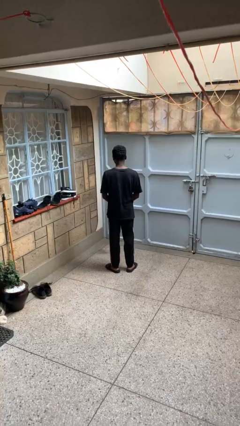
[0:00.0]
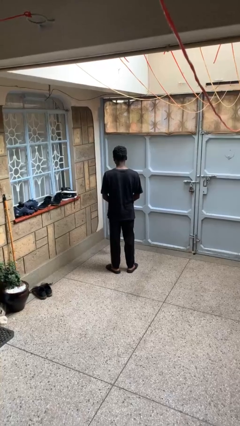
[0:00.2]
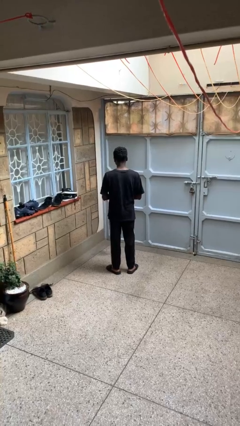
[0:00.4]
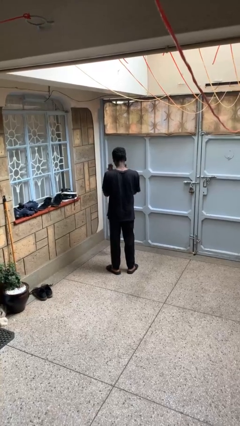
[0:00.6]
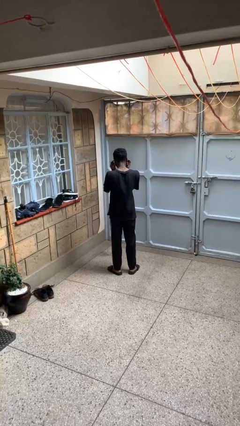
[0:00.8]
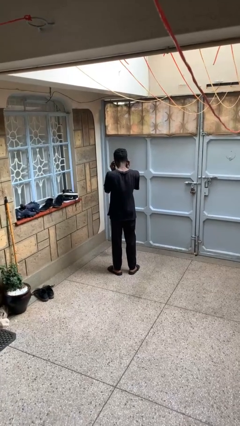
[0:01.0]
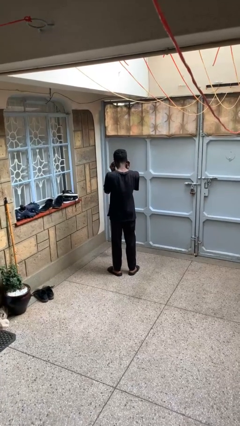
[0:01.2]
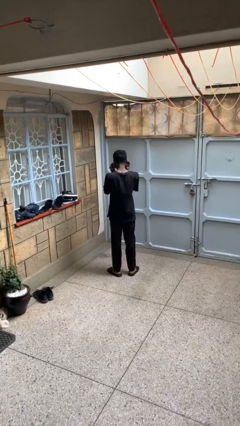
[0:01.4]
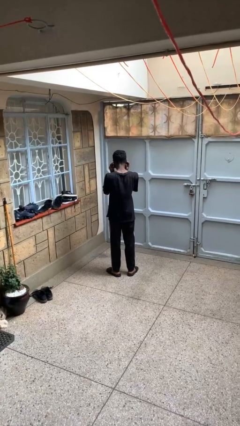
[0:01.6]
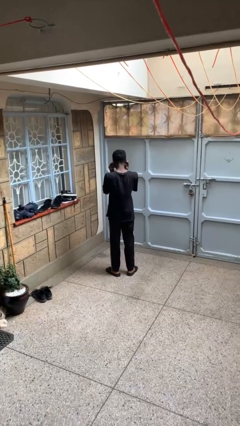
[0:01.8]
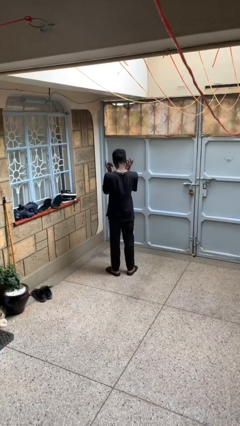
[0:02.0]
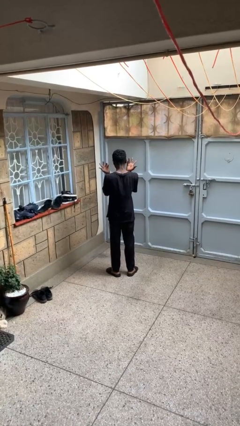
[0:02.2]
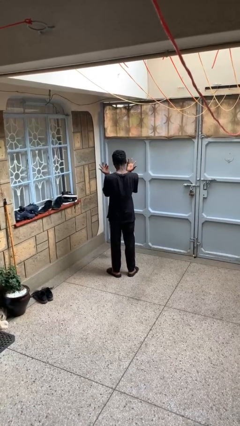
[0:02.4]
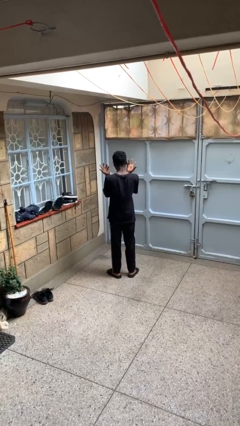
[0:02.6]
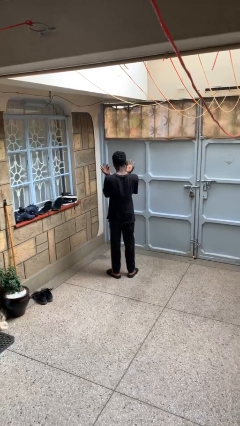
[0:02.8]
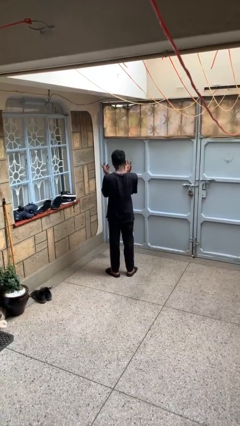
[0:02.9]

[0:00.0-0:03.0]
person puts fingers in ear

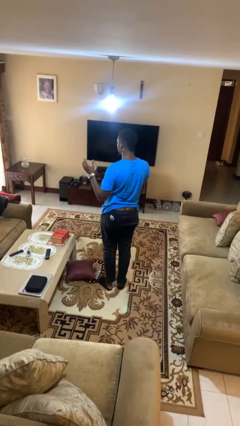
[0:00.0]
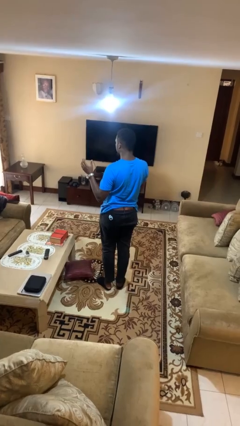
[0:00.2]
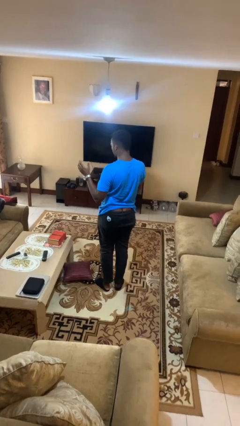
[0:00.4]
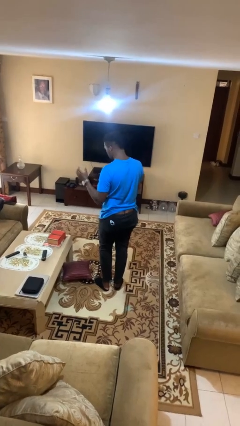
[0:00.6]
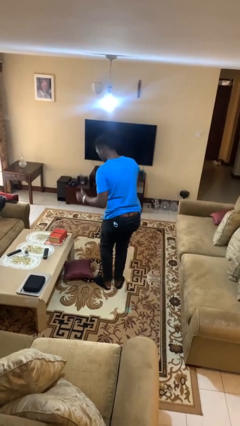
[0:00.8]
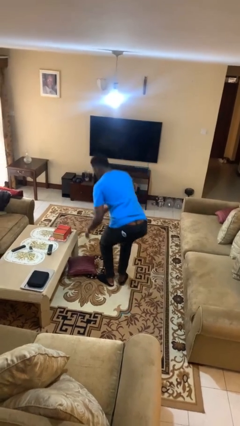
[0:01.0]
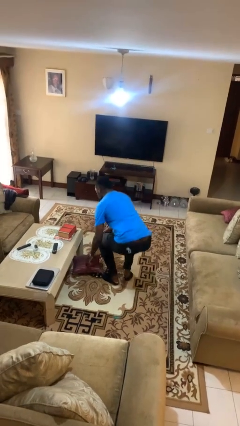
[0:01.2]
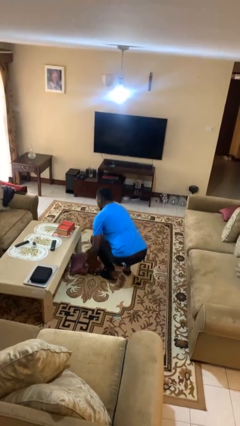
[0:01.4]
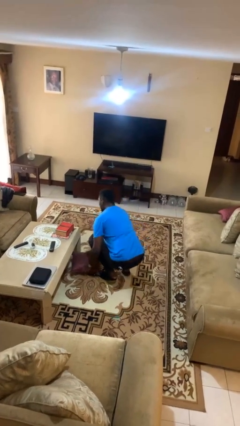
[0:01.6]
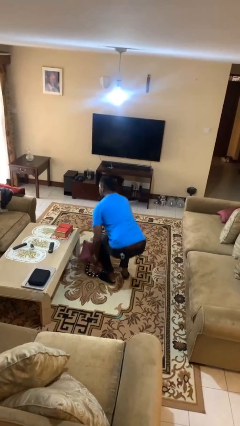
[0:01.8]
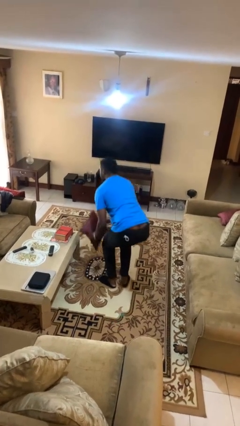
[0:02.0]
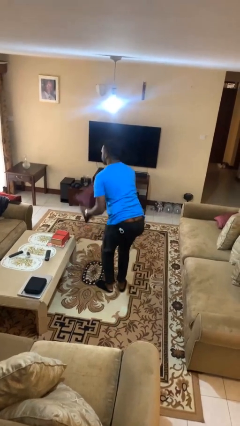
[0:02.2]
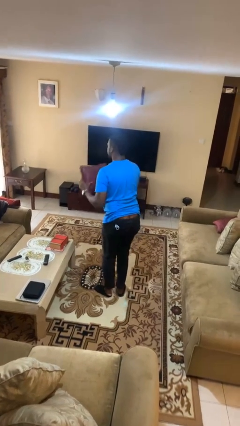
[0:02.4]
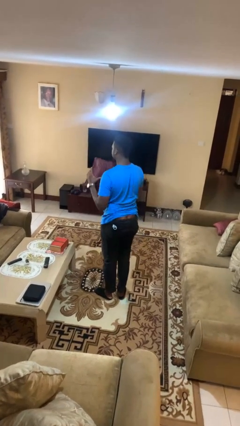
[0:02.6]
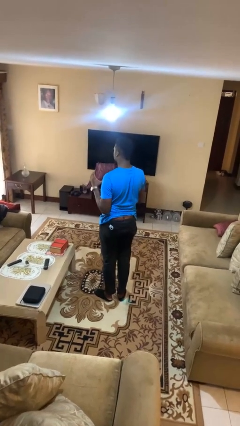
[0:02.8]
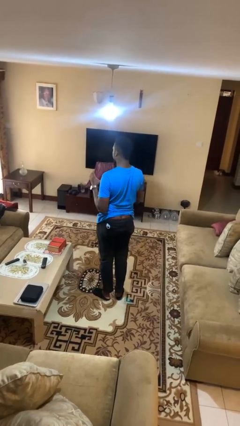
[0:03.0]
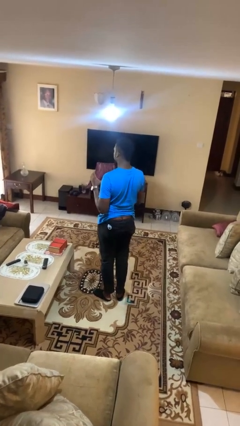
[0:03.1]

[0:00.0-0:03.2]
person picks up object from floor

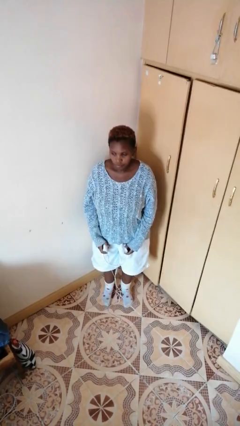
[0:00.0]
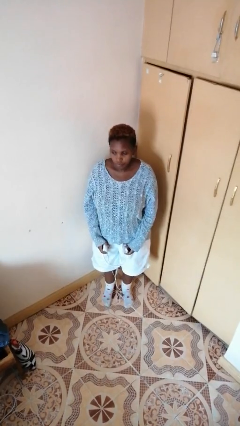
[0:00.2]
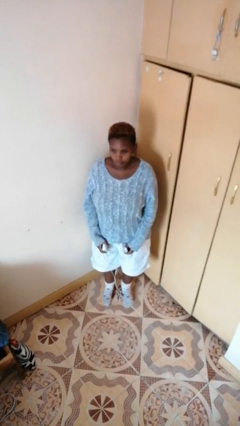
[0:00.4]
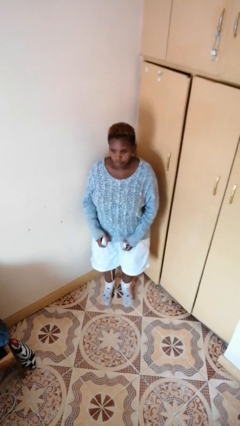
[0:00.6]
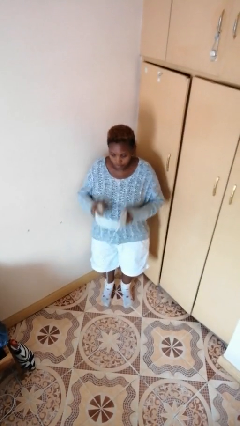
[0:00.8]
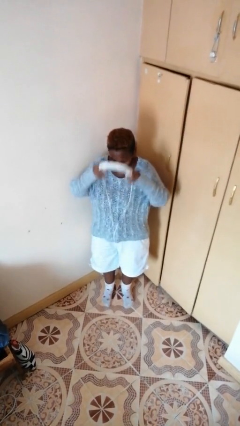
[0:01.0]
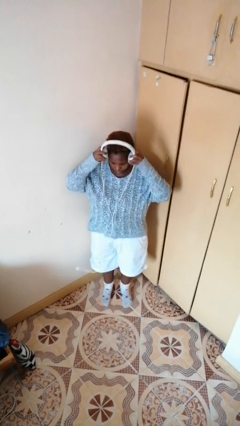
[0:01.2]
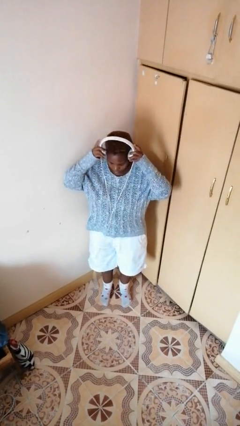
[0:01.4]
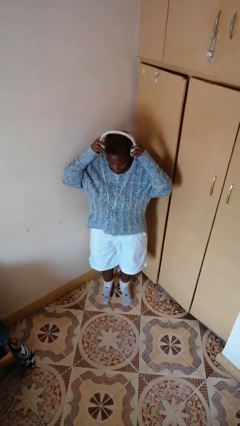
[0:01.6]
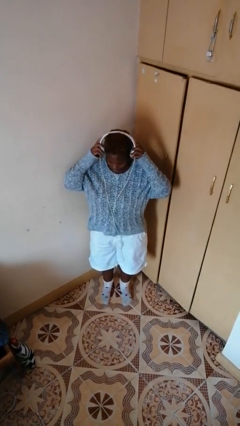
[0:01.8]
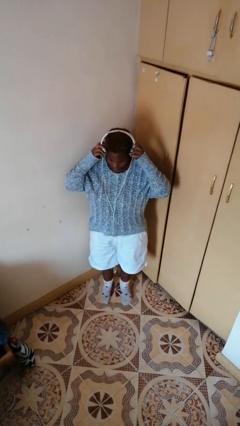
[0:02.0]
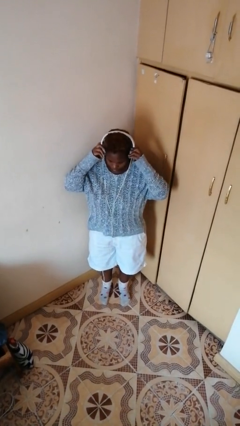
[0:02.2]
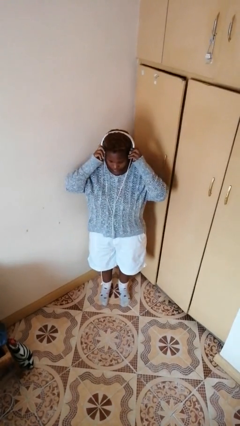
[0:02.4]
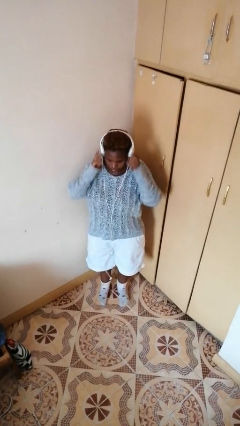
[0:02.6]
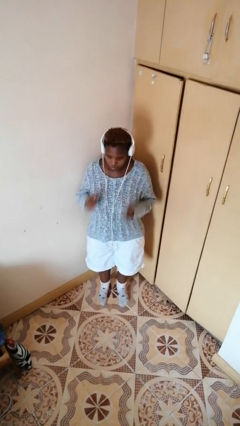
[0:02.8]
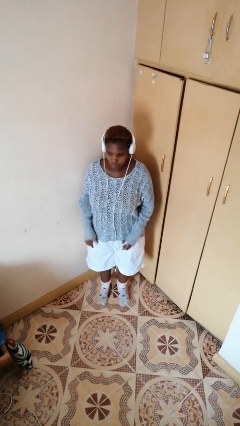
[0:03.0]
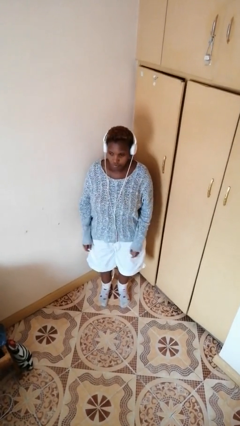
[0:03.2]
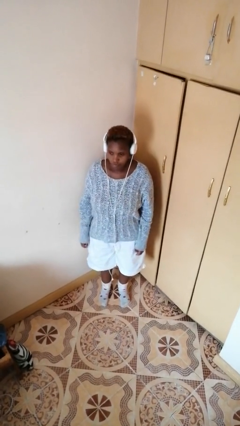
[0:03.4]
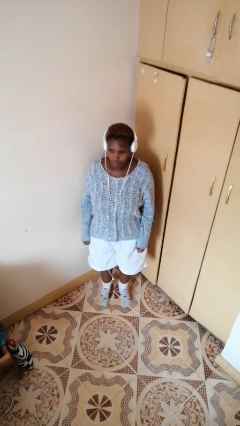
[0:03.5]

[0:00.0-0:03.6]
person puts on headphones

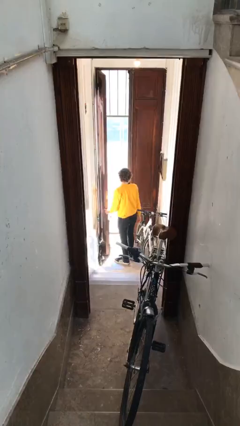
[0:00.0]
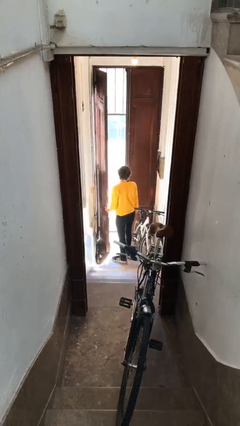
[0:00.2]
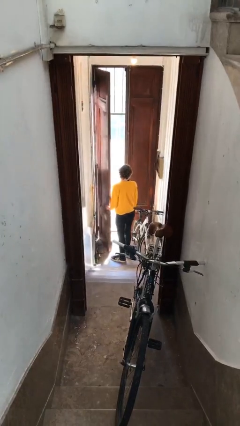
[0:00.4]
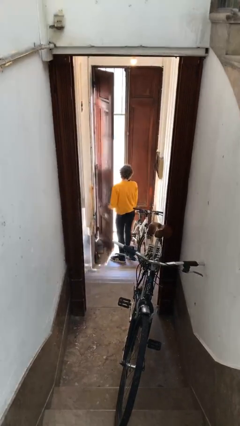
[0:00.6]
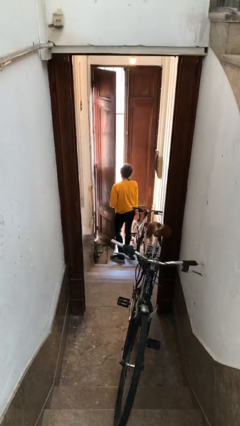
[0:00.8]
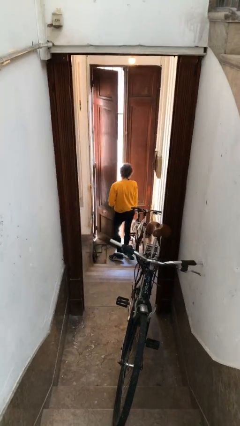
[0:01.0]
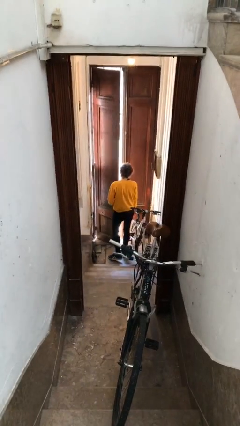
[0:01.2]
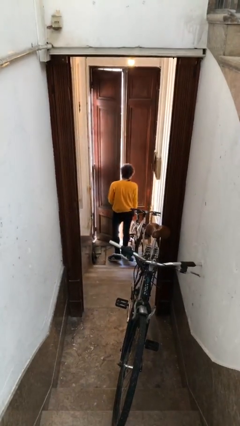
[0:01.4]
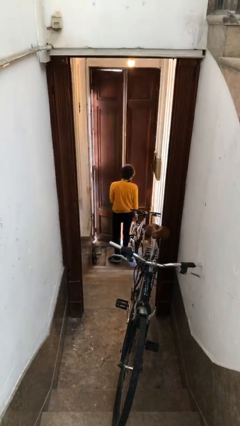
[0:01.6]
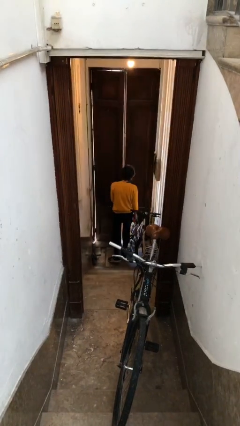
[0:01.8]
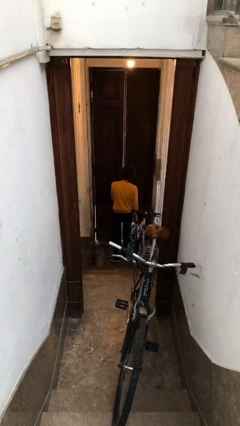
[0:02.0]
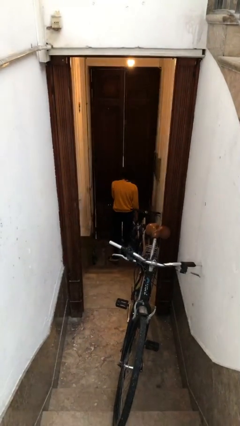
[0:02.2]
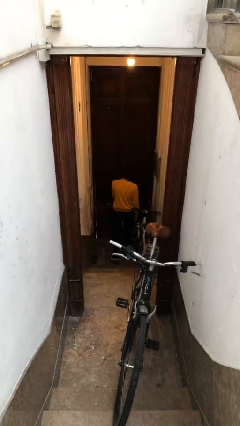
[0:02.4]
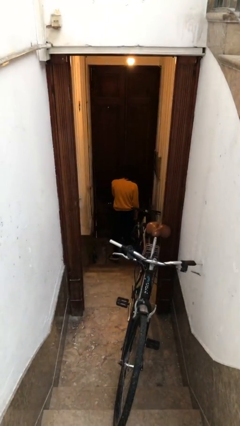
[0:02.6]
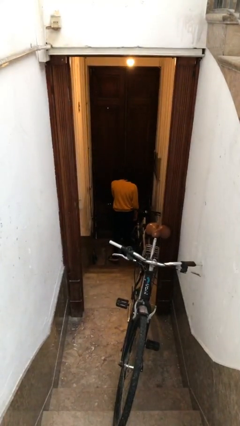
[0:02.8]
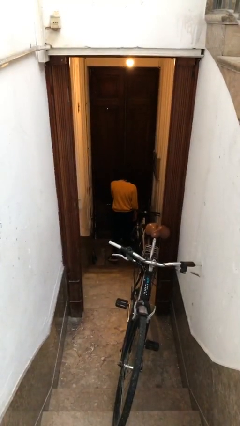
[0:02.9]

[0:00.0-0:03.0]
person closes facility door

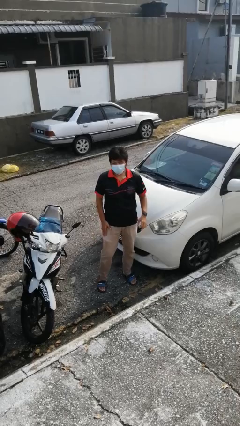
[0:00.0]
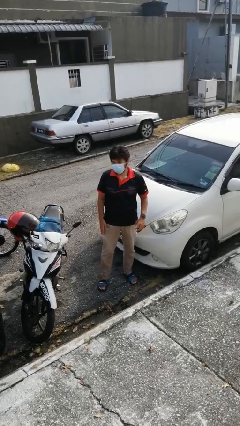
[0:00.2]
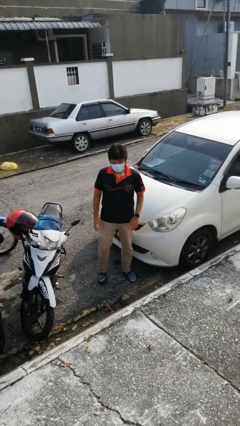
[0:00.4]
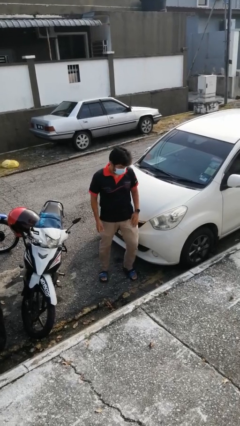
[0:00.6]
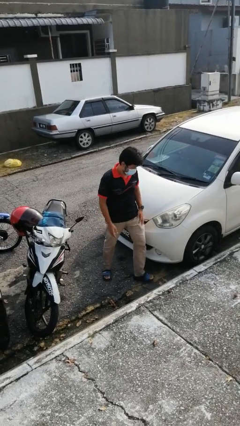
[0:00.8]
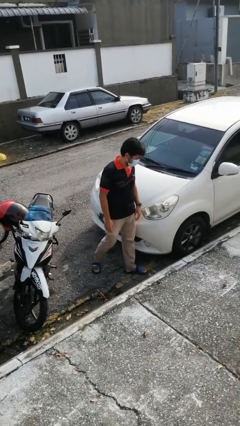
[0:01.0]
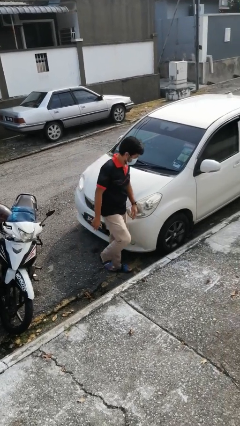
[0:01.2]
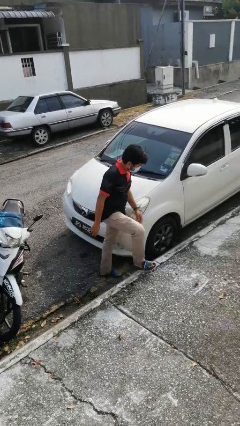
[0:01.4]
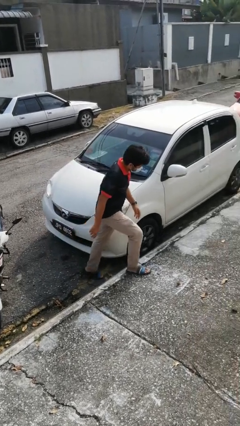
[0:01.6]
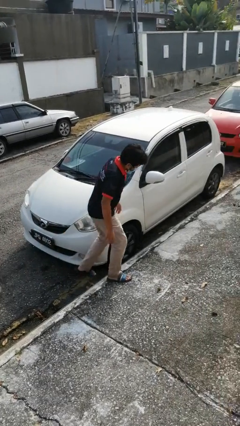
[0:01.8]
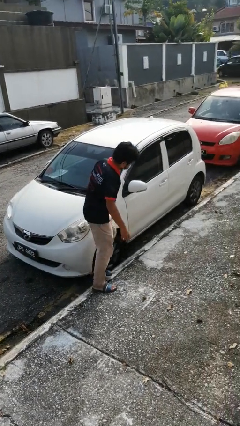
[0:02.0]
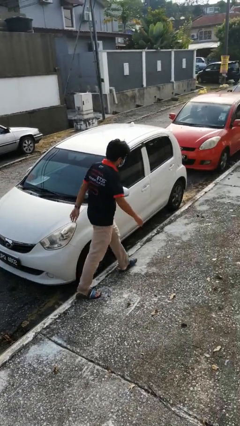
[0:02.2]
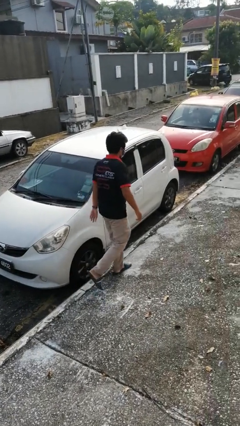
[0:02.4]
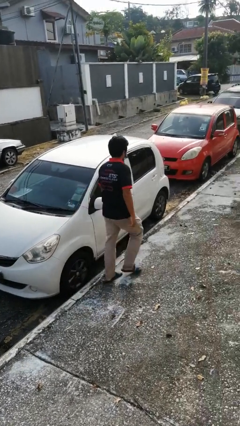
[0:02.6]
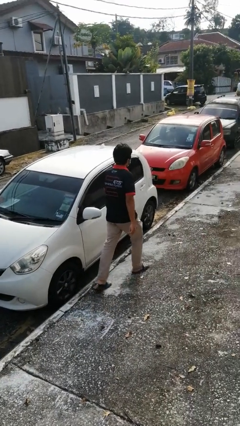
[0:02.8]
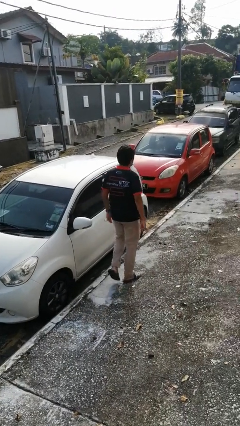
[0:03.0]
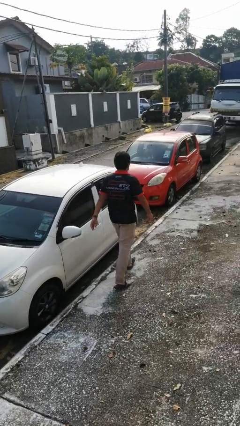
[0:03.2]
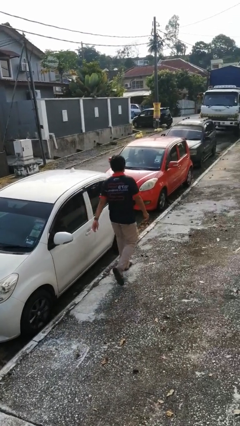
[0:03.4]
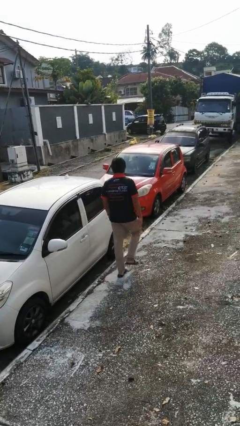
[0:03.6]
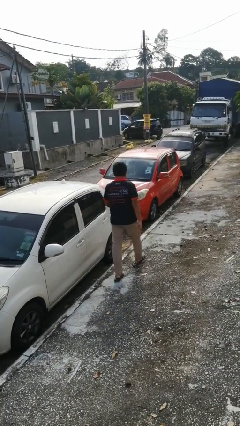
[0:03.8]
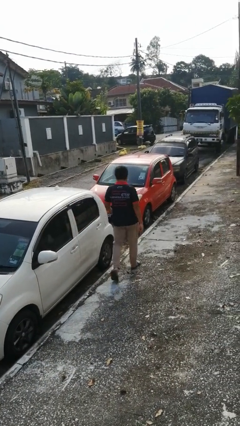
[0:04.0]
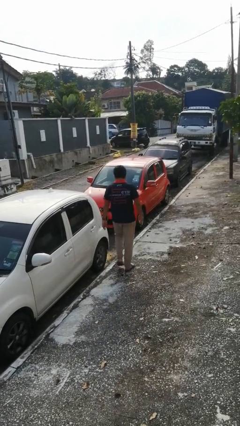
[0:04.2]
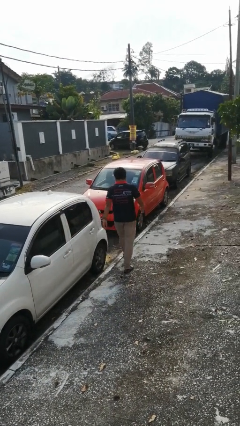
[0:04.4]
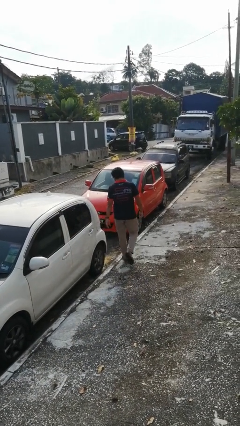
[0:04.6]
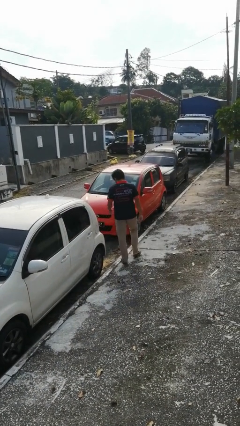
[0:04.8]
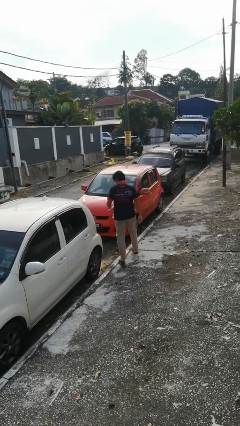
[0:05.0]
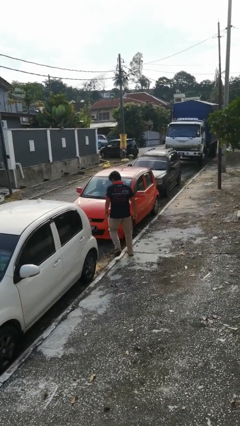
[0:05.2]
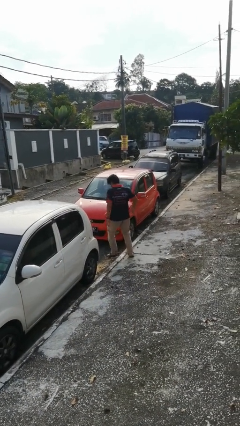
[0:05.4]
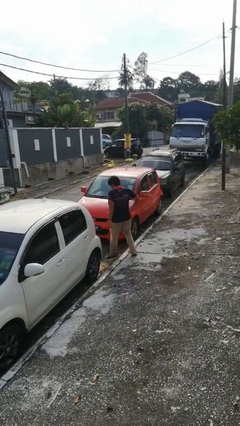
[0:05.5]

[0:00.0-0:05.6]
person walks around car
